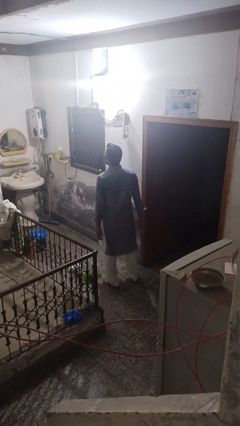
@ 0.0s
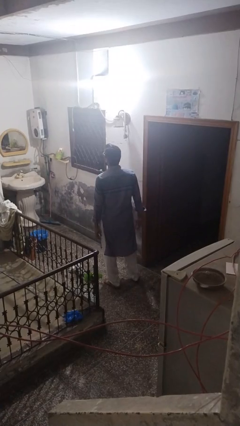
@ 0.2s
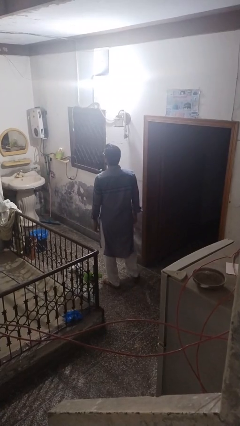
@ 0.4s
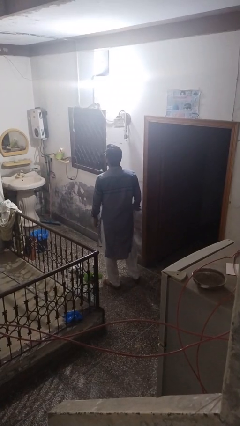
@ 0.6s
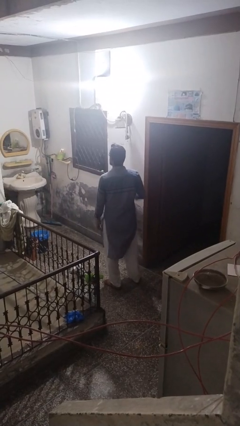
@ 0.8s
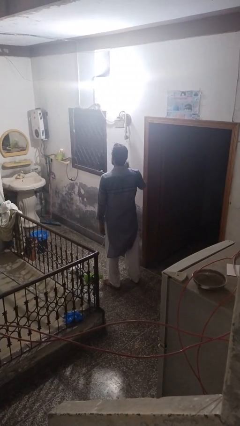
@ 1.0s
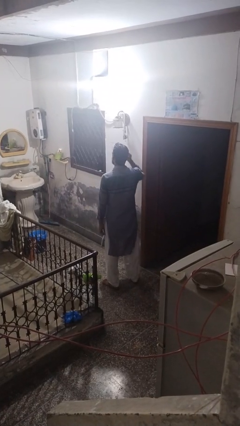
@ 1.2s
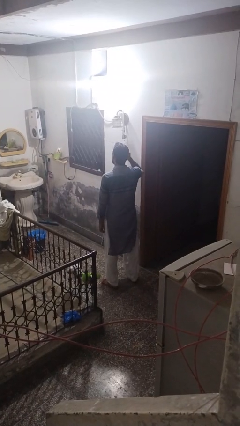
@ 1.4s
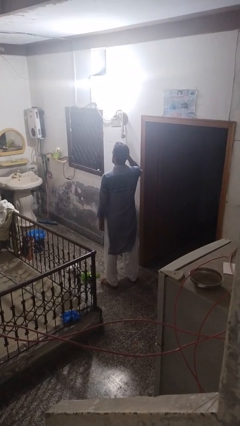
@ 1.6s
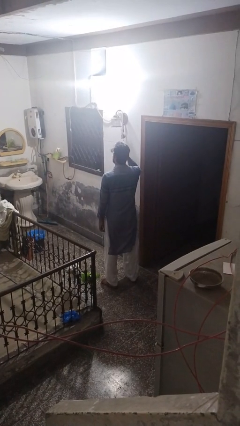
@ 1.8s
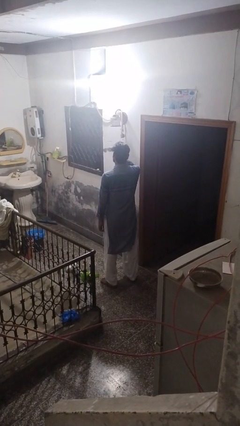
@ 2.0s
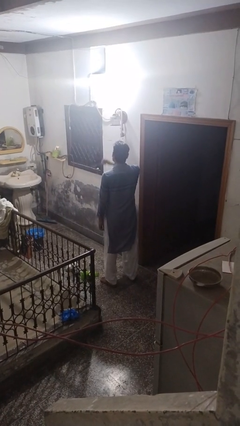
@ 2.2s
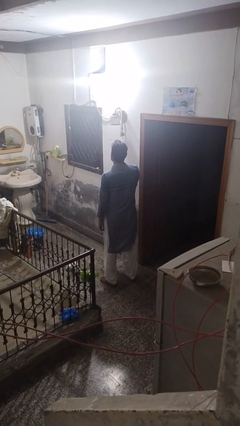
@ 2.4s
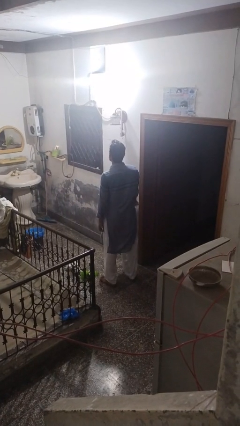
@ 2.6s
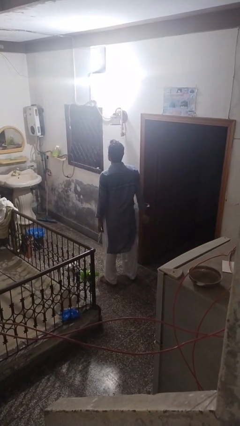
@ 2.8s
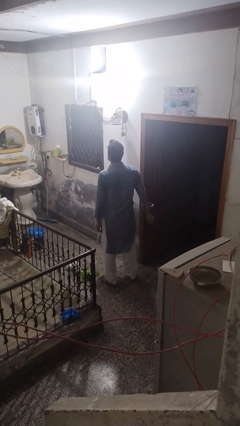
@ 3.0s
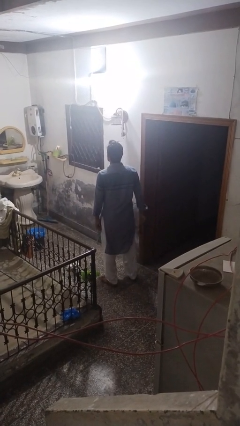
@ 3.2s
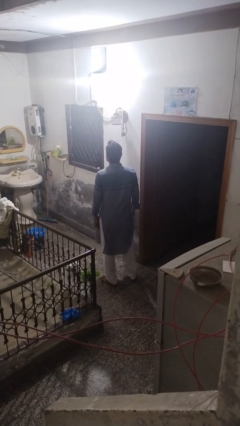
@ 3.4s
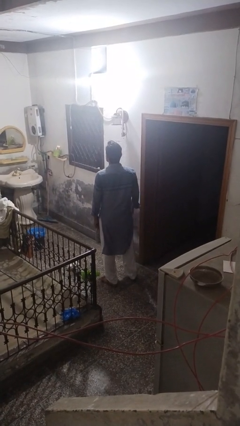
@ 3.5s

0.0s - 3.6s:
person takes off sunglasses

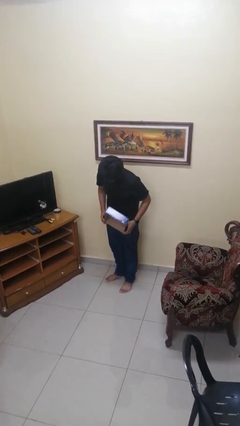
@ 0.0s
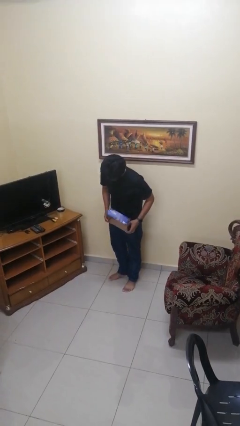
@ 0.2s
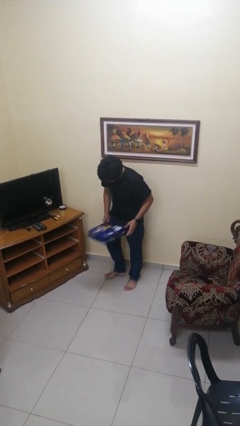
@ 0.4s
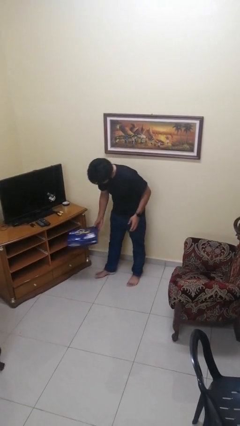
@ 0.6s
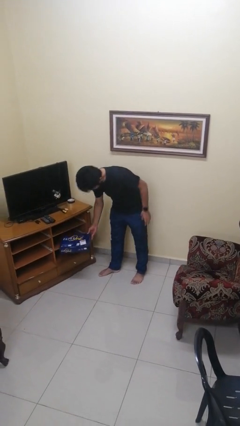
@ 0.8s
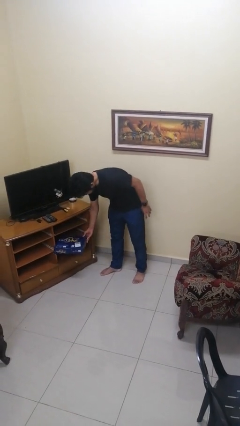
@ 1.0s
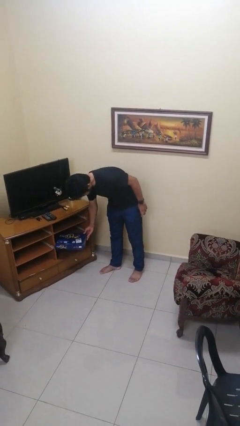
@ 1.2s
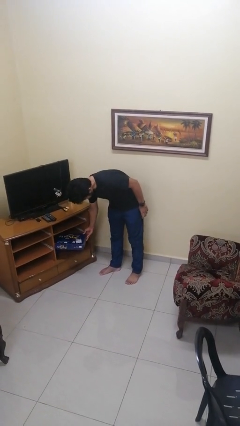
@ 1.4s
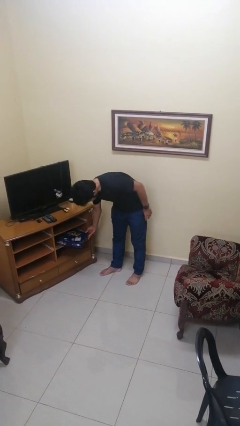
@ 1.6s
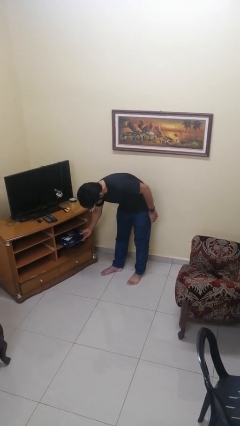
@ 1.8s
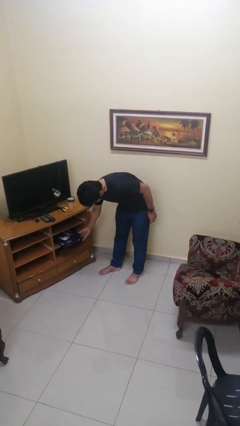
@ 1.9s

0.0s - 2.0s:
person puts down object into cabinet

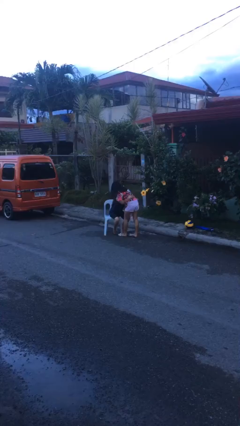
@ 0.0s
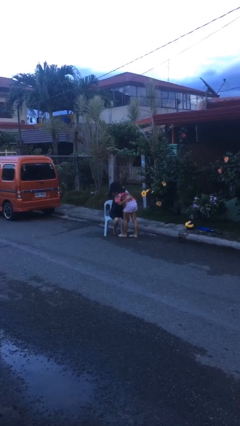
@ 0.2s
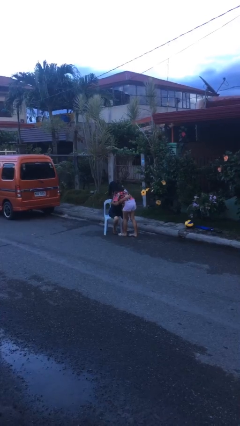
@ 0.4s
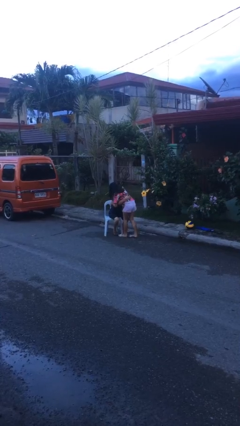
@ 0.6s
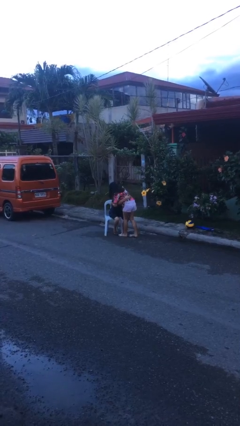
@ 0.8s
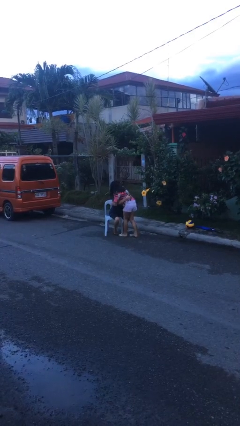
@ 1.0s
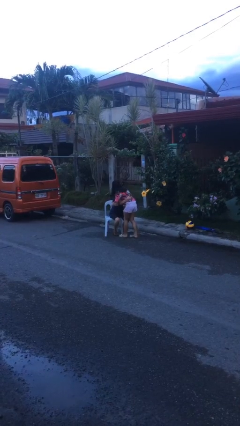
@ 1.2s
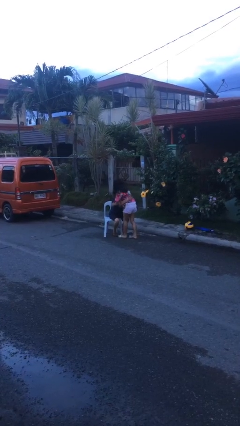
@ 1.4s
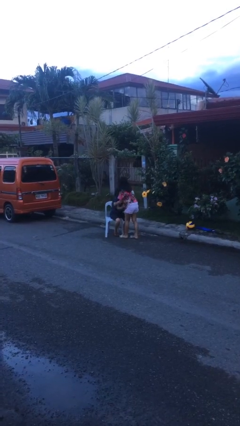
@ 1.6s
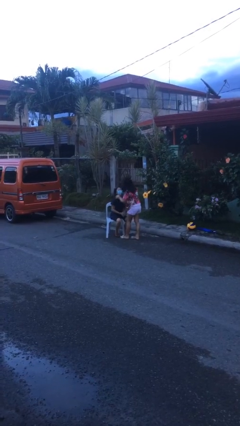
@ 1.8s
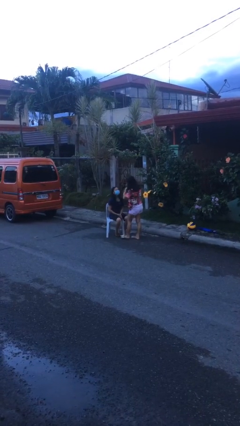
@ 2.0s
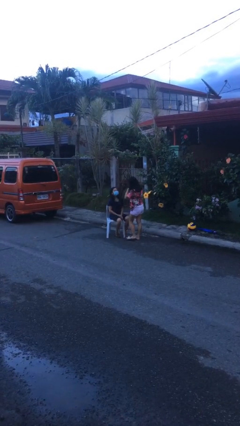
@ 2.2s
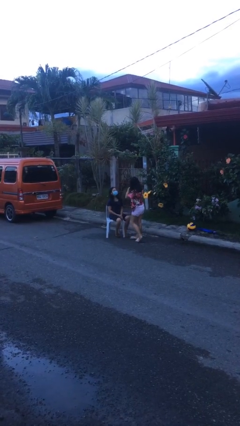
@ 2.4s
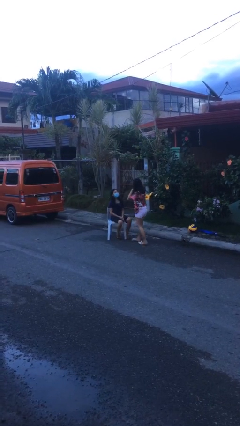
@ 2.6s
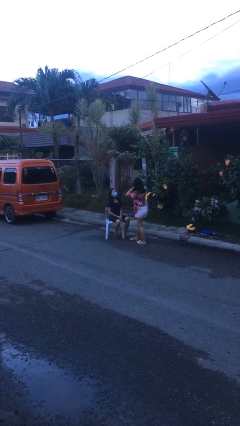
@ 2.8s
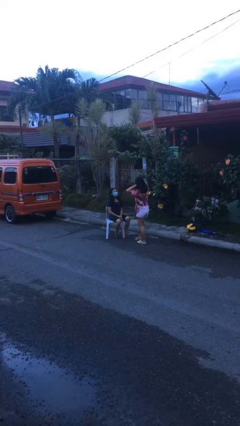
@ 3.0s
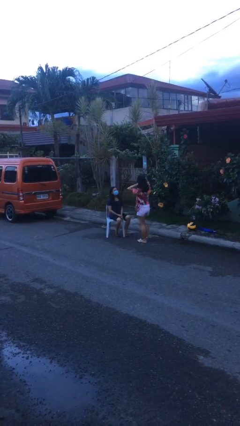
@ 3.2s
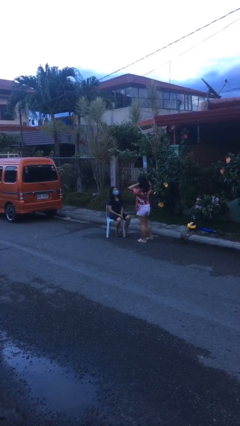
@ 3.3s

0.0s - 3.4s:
person embraces person

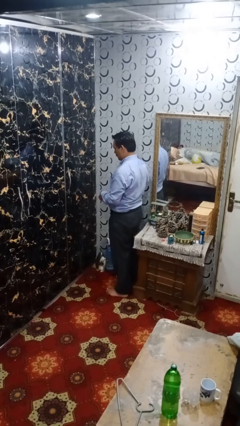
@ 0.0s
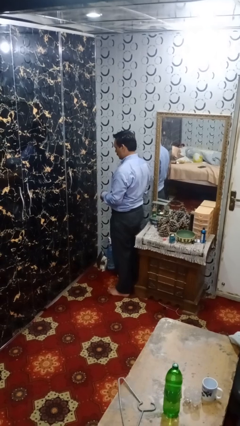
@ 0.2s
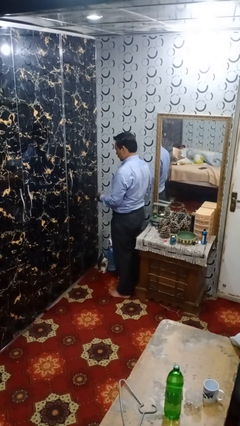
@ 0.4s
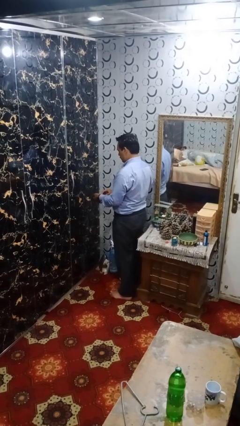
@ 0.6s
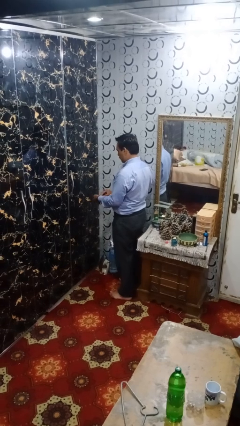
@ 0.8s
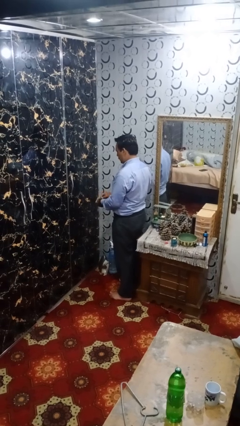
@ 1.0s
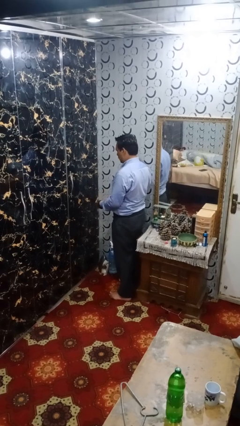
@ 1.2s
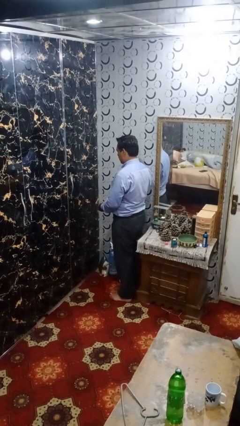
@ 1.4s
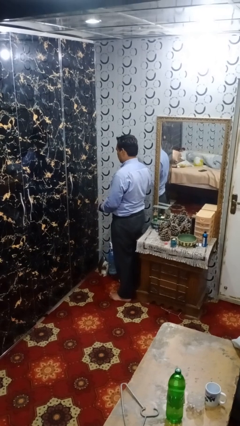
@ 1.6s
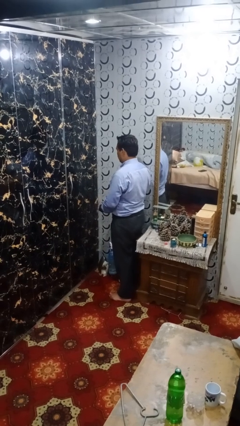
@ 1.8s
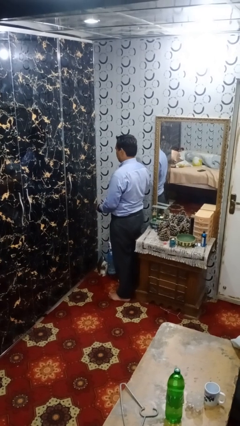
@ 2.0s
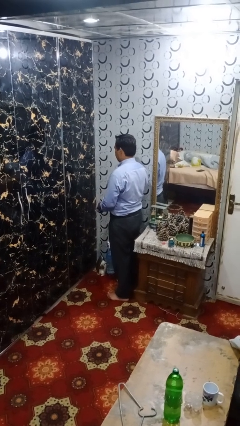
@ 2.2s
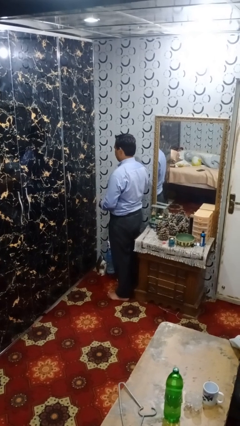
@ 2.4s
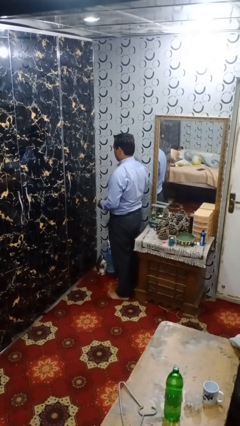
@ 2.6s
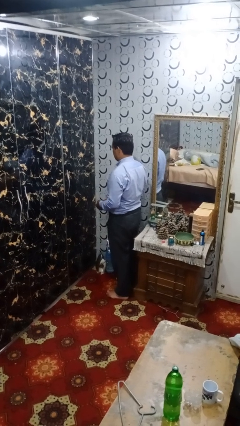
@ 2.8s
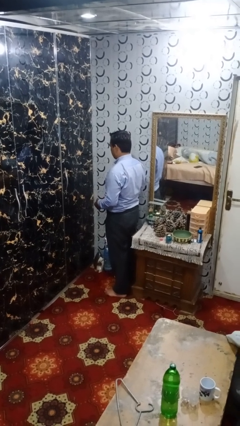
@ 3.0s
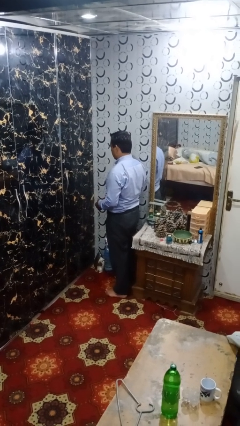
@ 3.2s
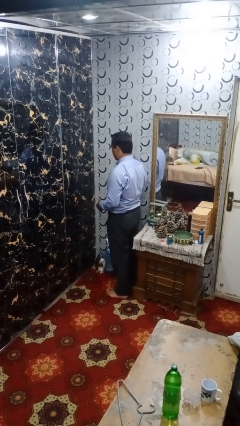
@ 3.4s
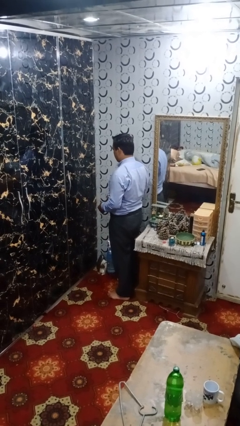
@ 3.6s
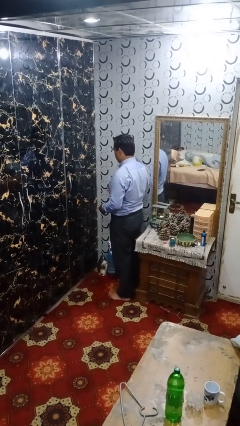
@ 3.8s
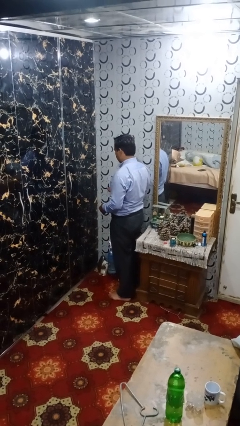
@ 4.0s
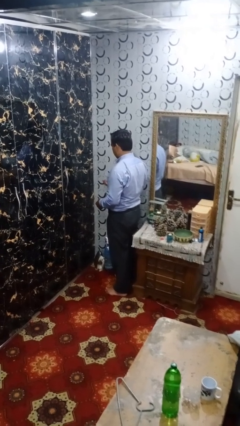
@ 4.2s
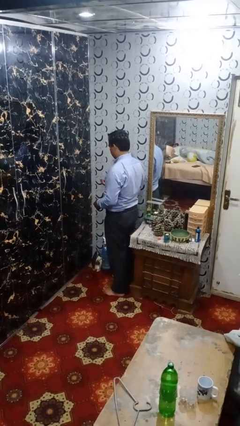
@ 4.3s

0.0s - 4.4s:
person takes off wristwatch

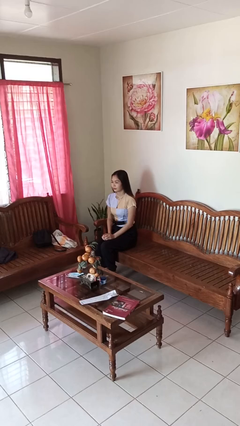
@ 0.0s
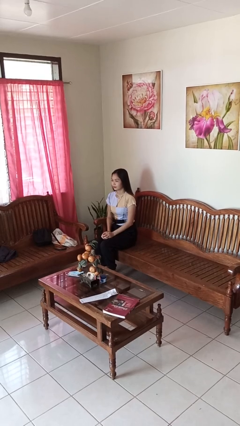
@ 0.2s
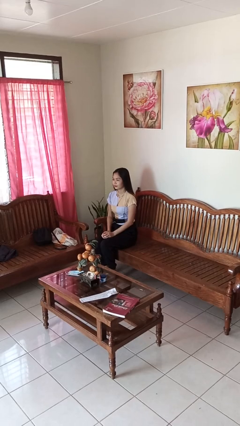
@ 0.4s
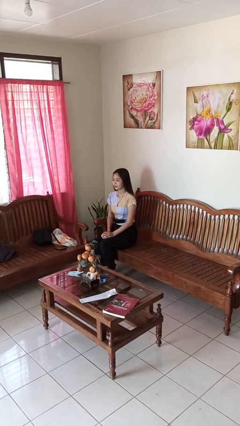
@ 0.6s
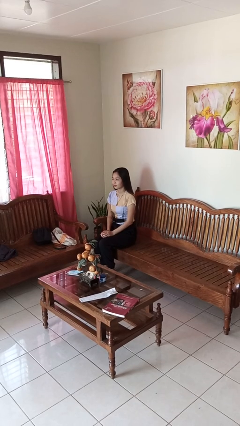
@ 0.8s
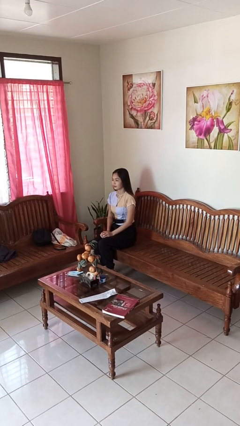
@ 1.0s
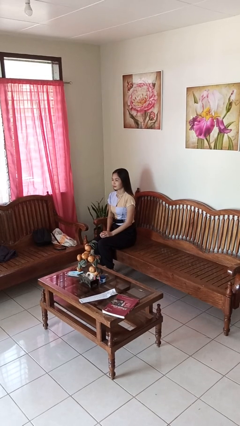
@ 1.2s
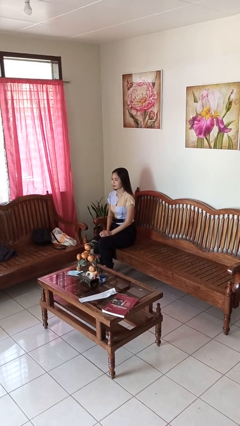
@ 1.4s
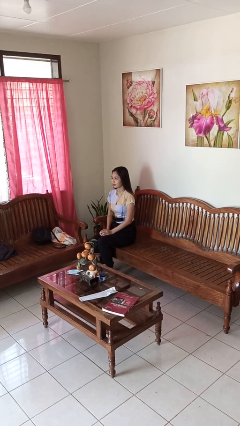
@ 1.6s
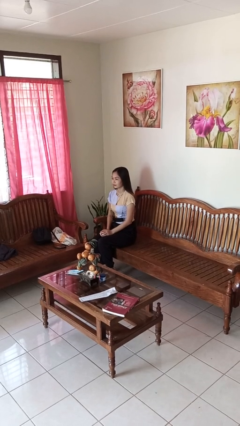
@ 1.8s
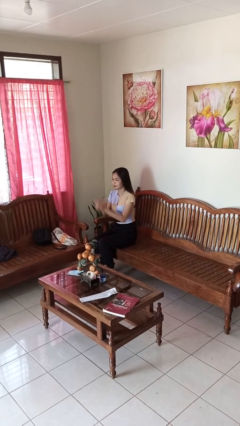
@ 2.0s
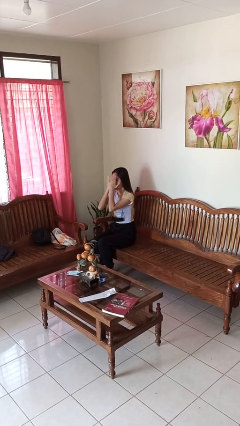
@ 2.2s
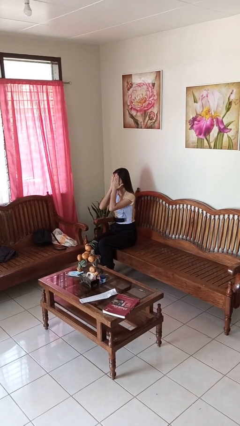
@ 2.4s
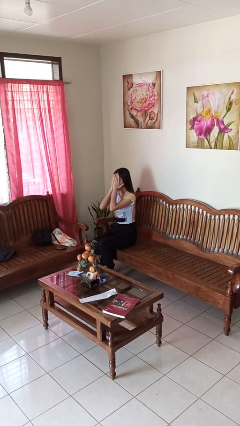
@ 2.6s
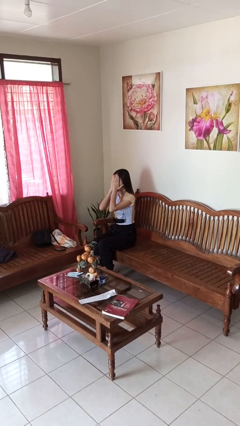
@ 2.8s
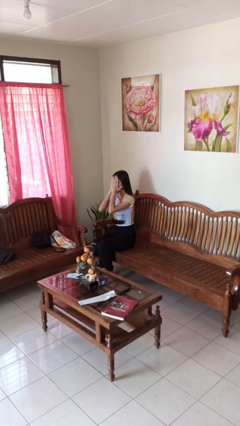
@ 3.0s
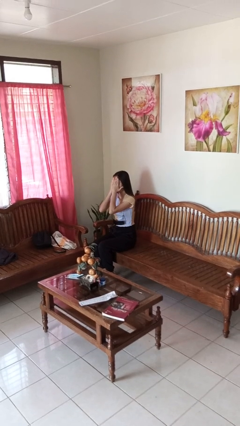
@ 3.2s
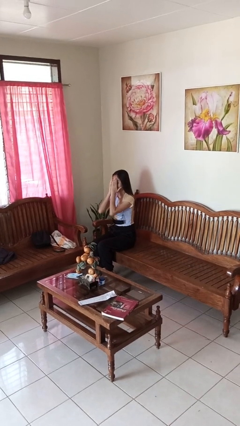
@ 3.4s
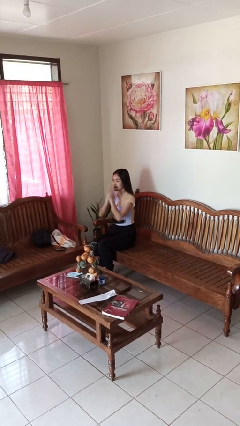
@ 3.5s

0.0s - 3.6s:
person covers face with hands

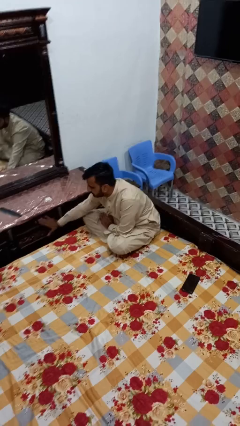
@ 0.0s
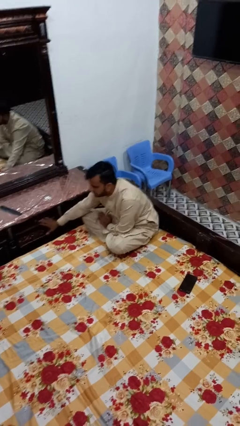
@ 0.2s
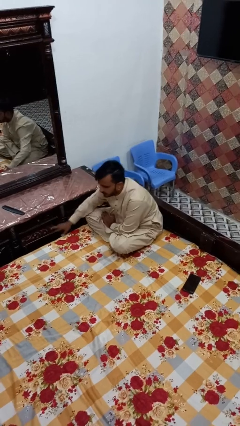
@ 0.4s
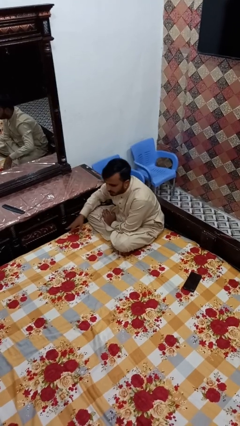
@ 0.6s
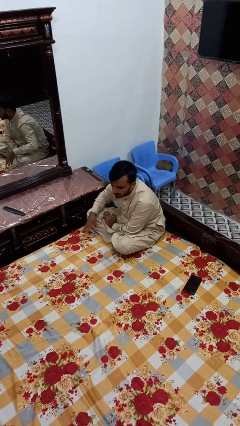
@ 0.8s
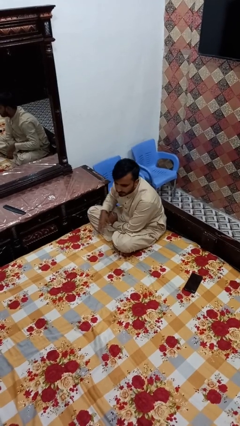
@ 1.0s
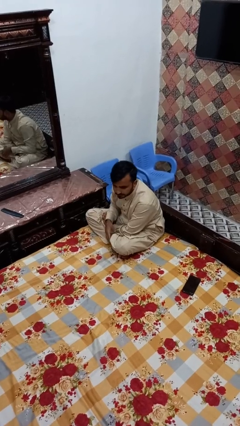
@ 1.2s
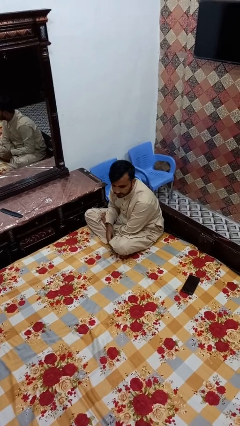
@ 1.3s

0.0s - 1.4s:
person closes dresser drawer
